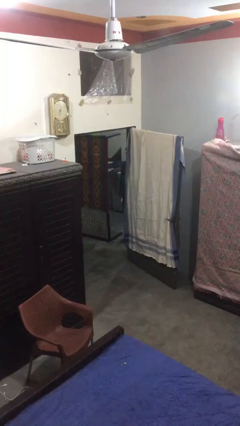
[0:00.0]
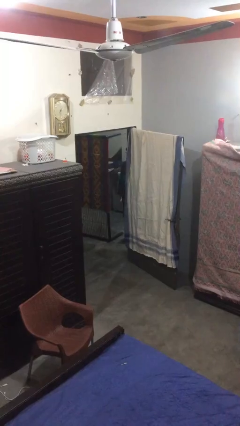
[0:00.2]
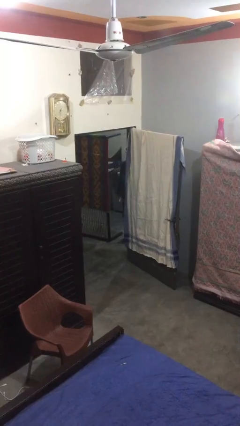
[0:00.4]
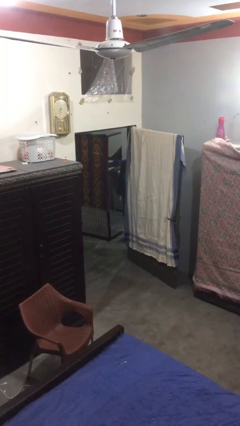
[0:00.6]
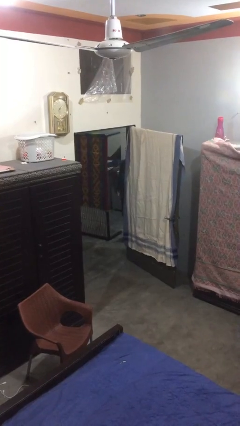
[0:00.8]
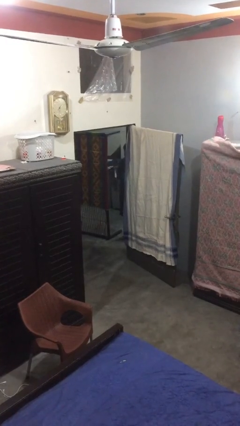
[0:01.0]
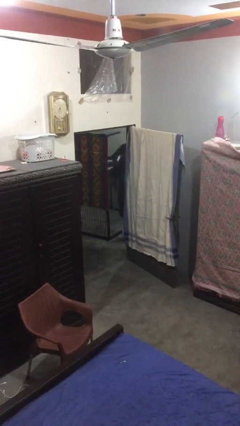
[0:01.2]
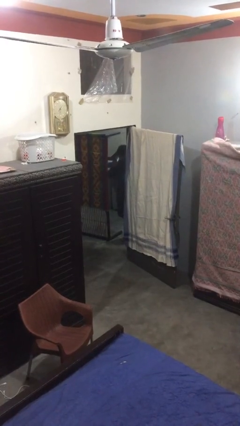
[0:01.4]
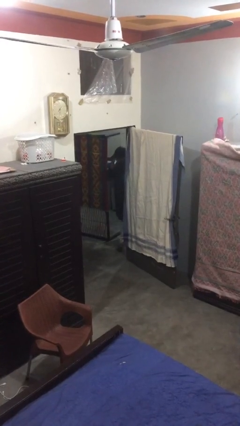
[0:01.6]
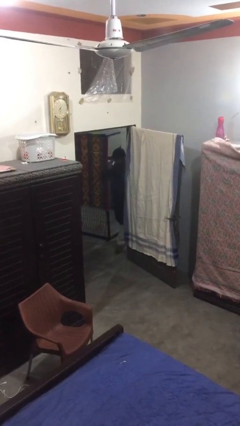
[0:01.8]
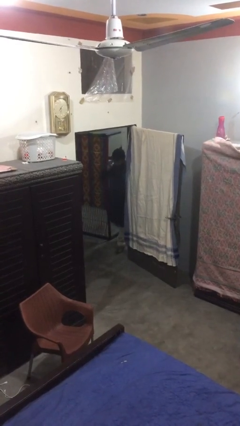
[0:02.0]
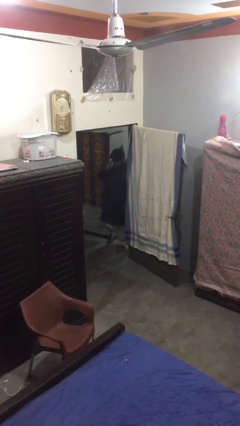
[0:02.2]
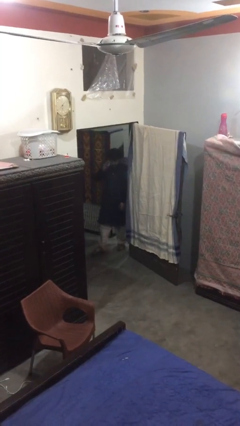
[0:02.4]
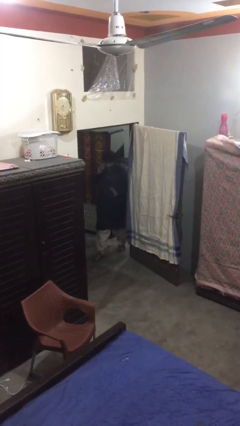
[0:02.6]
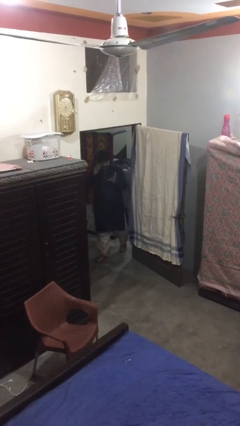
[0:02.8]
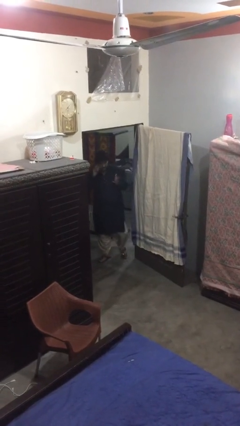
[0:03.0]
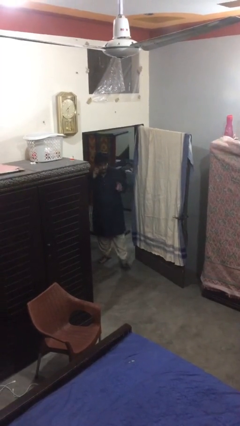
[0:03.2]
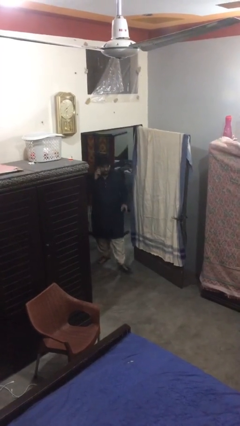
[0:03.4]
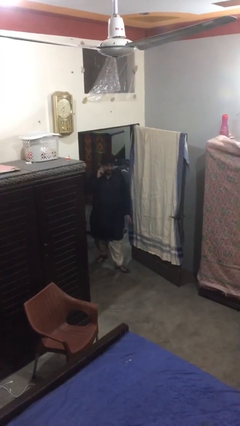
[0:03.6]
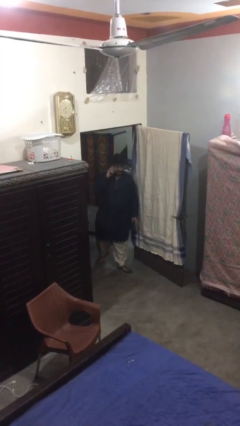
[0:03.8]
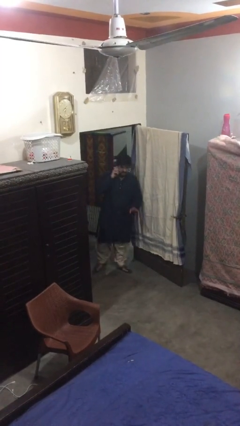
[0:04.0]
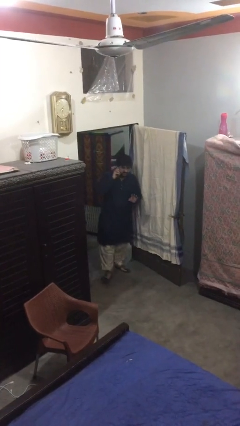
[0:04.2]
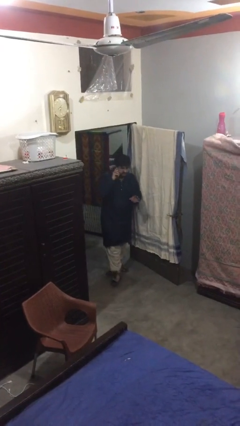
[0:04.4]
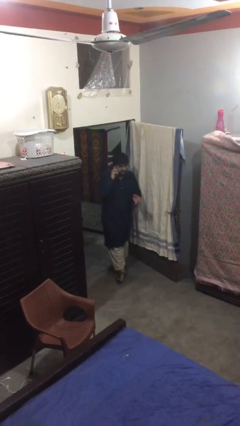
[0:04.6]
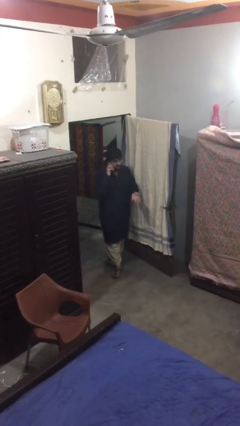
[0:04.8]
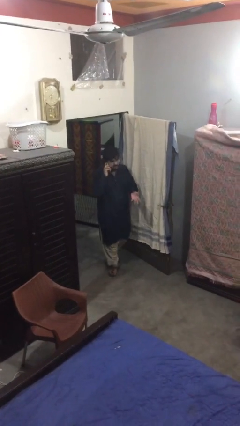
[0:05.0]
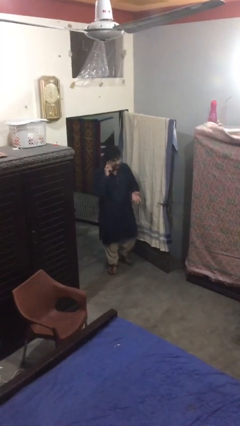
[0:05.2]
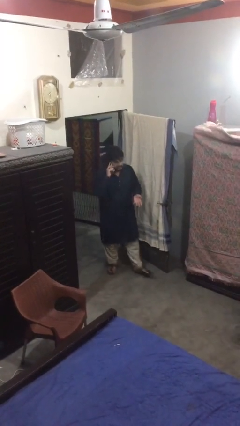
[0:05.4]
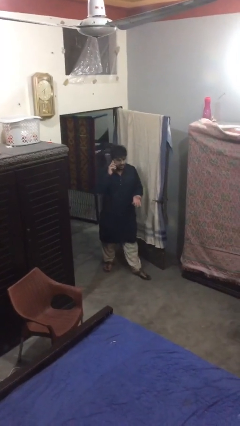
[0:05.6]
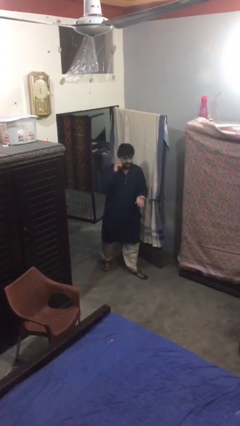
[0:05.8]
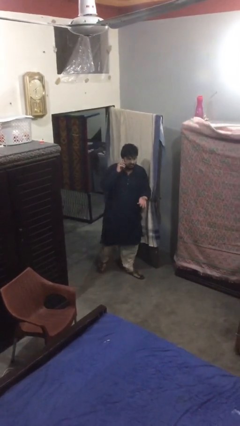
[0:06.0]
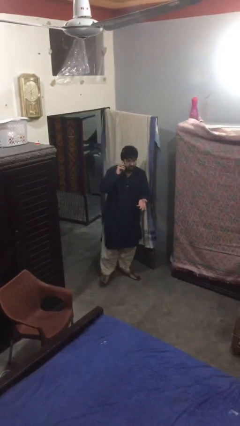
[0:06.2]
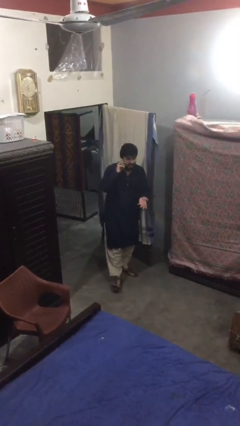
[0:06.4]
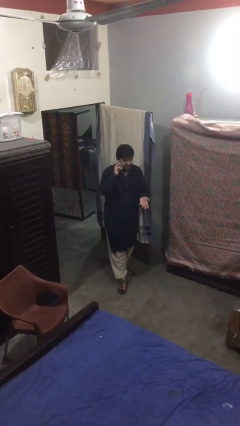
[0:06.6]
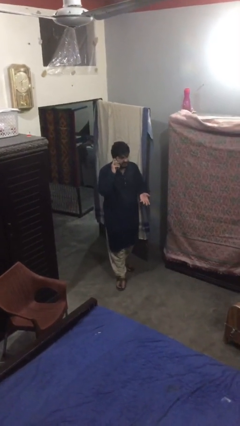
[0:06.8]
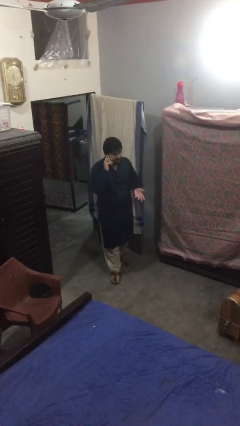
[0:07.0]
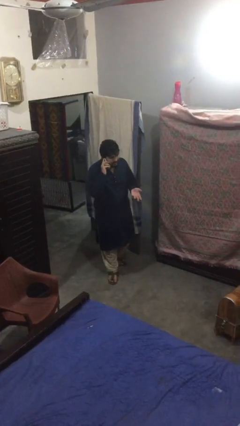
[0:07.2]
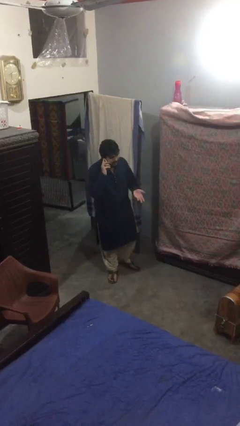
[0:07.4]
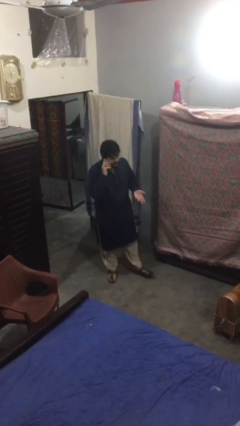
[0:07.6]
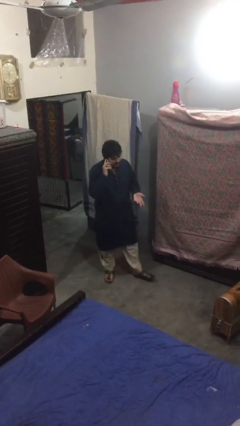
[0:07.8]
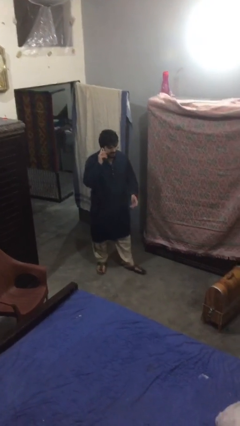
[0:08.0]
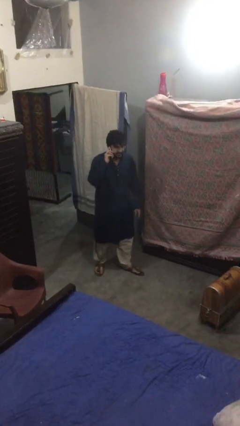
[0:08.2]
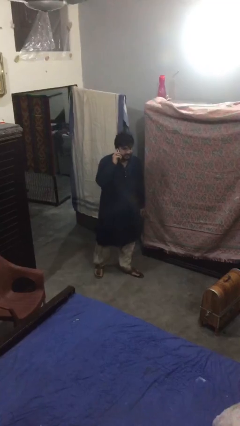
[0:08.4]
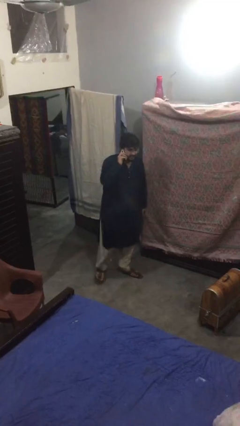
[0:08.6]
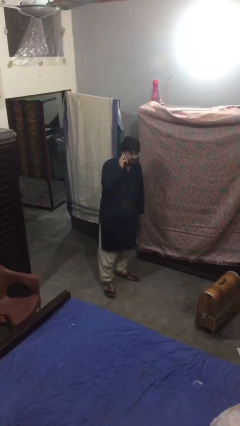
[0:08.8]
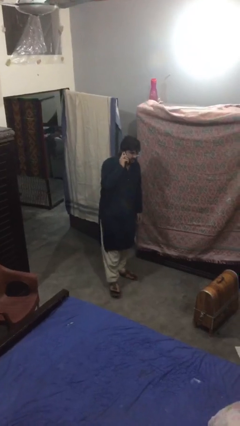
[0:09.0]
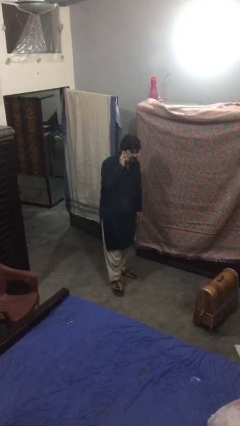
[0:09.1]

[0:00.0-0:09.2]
person enters scene through structure

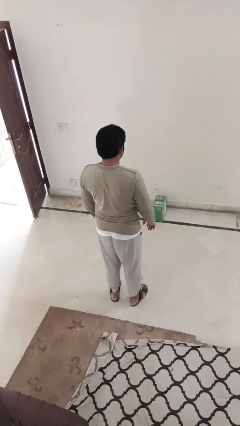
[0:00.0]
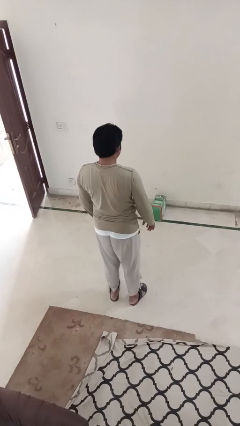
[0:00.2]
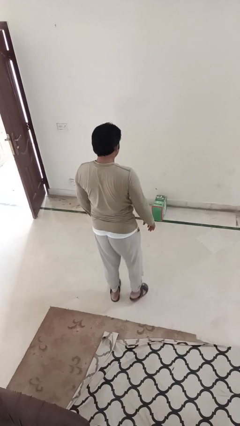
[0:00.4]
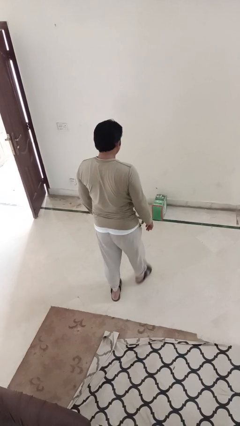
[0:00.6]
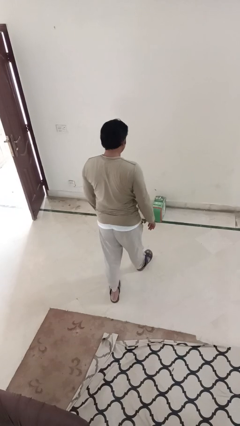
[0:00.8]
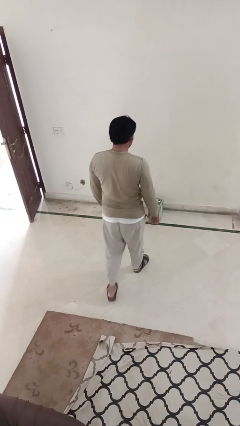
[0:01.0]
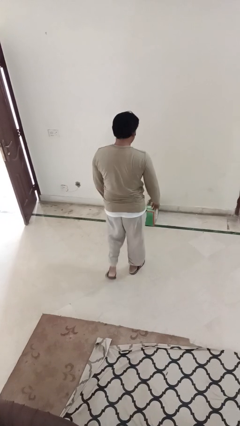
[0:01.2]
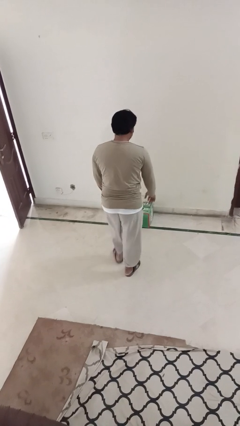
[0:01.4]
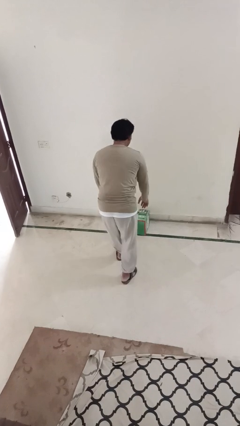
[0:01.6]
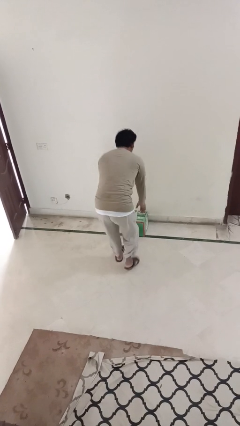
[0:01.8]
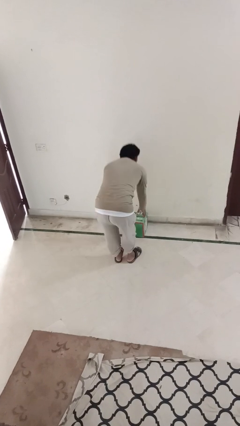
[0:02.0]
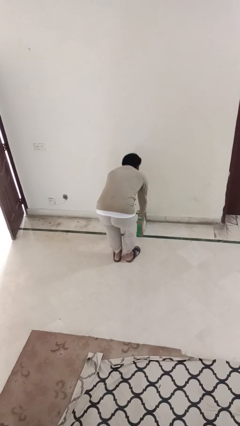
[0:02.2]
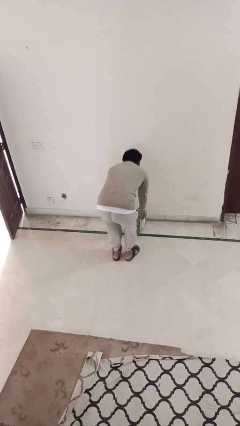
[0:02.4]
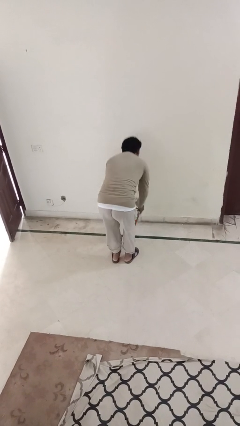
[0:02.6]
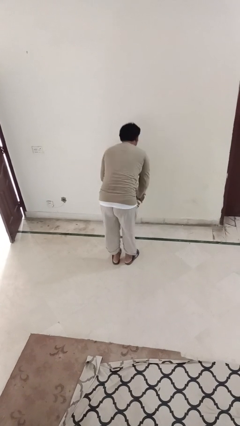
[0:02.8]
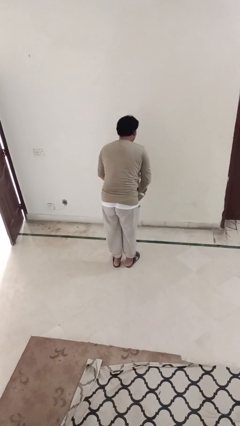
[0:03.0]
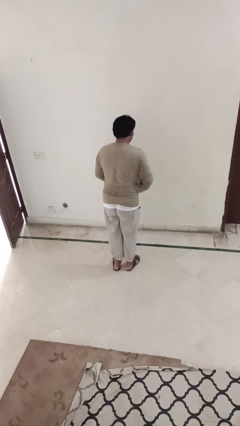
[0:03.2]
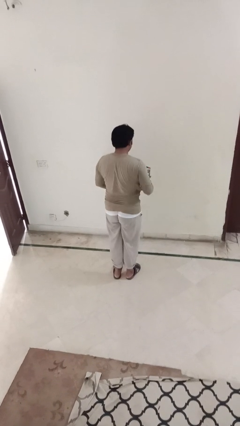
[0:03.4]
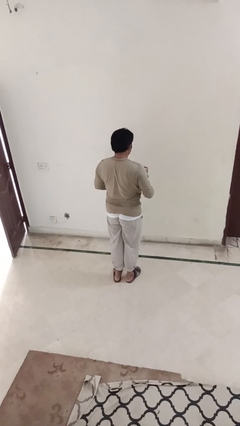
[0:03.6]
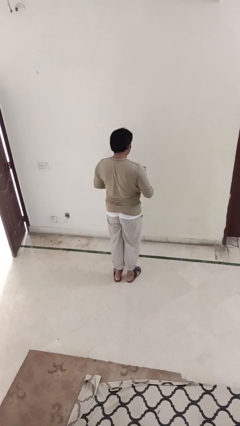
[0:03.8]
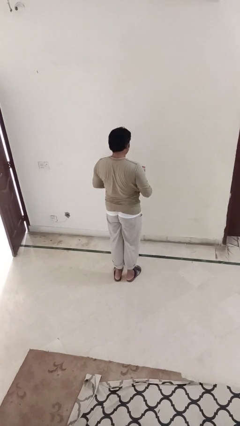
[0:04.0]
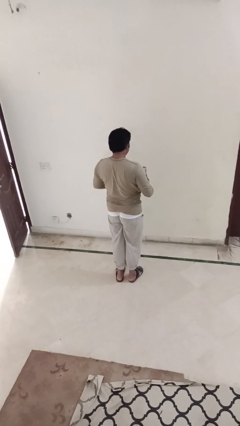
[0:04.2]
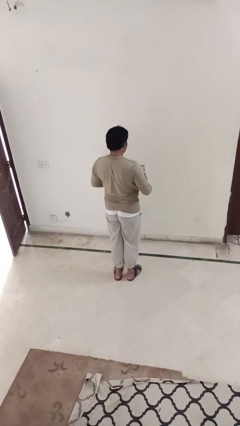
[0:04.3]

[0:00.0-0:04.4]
person picks up object from floor

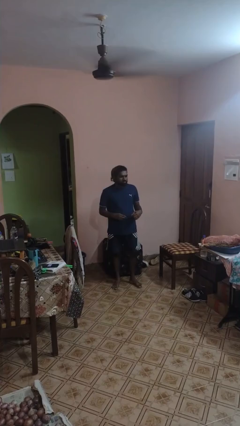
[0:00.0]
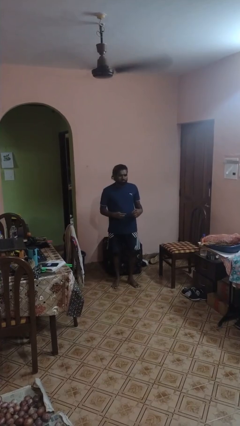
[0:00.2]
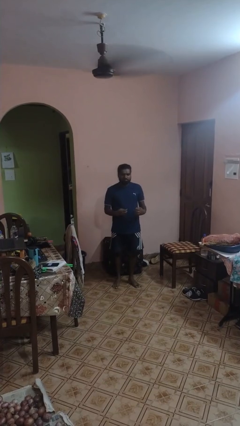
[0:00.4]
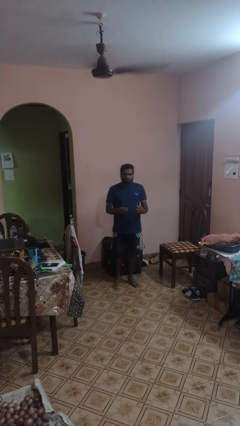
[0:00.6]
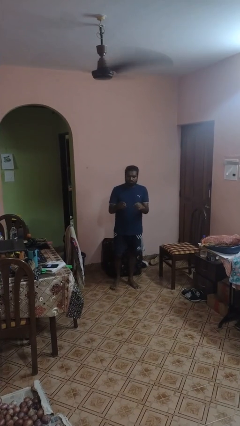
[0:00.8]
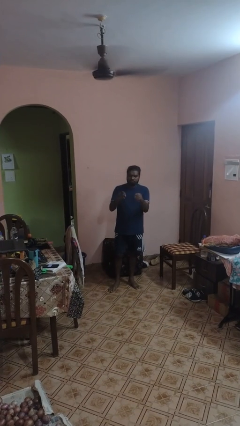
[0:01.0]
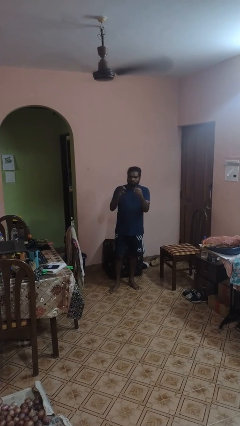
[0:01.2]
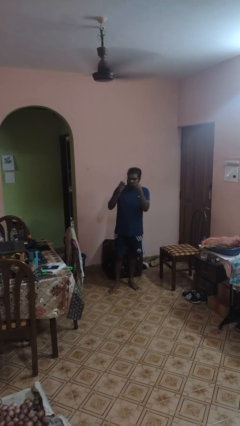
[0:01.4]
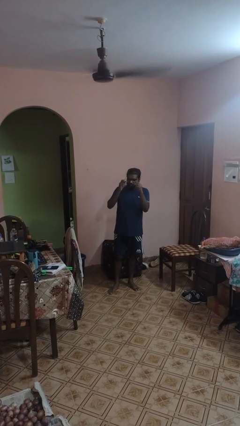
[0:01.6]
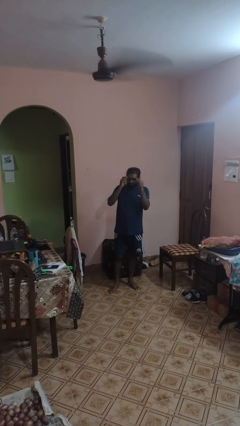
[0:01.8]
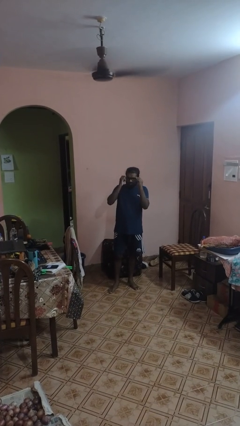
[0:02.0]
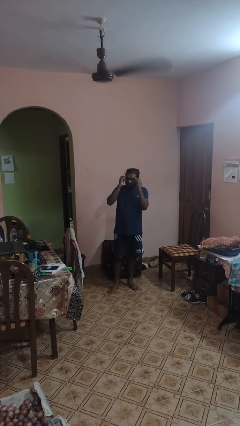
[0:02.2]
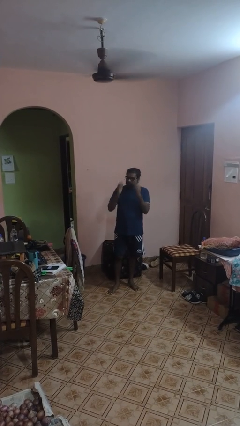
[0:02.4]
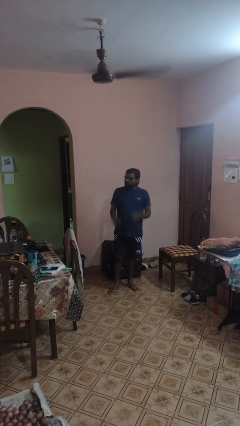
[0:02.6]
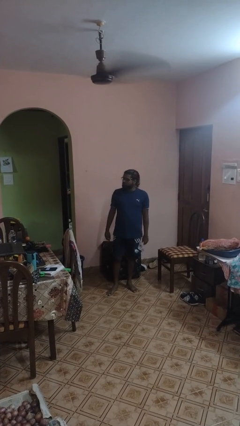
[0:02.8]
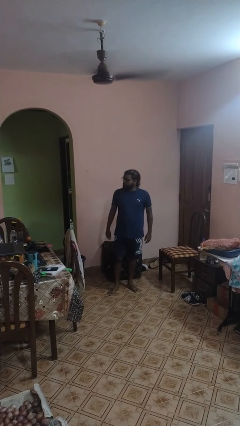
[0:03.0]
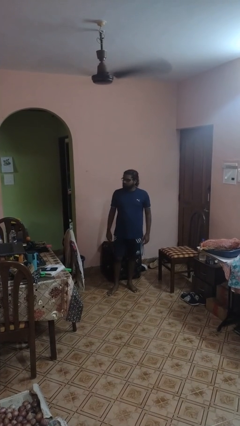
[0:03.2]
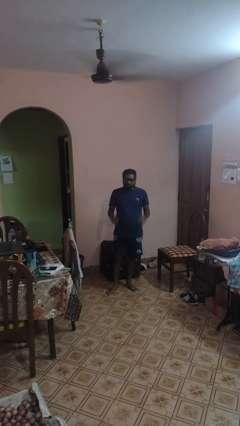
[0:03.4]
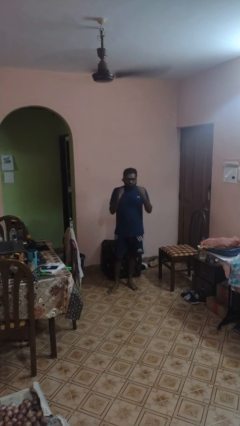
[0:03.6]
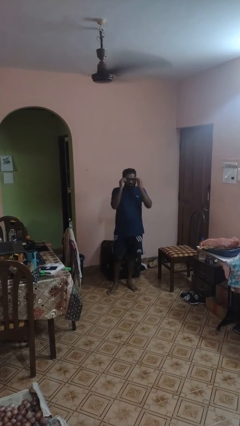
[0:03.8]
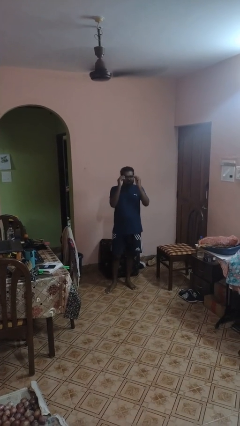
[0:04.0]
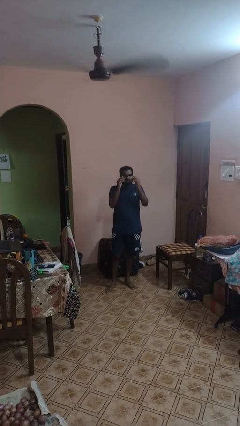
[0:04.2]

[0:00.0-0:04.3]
person puts on glasses
